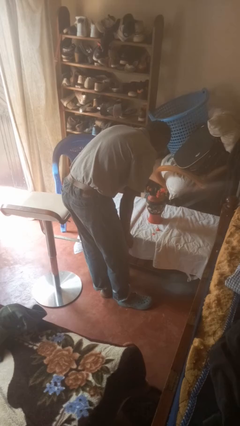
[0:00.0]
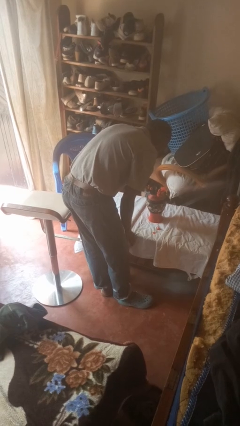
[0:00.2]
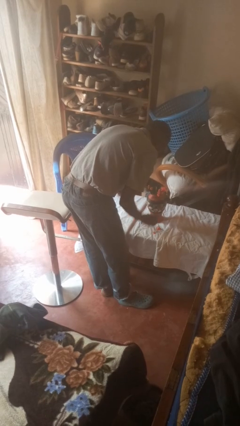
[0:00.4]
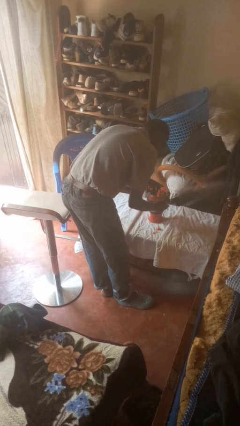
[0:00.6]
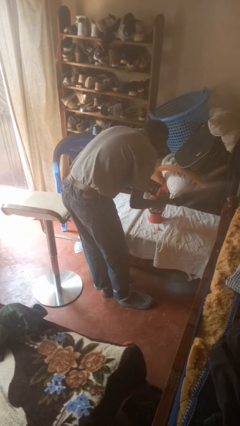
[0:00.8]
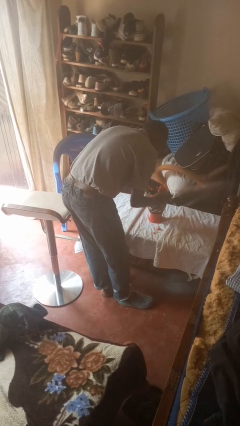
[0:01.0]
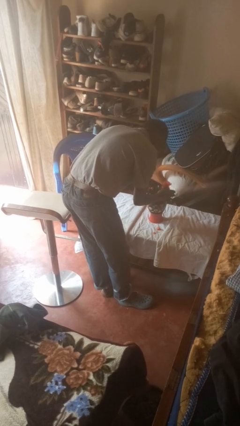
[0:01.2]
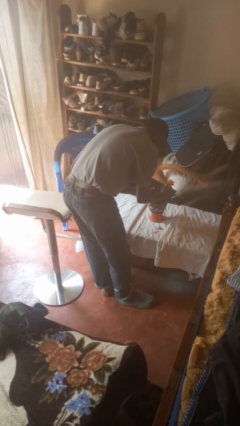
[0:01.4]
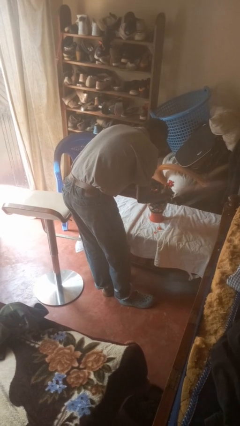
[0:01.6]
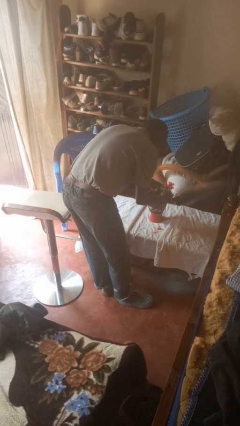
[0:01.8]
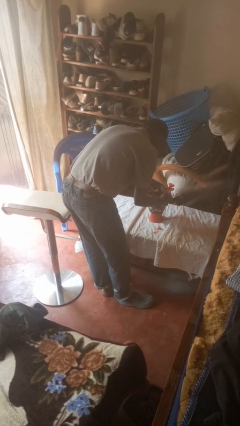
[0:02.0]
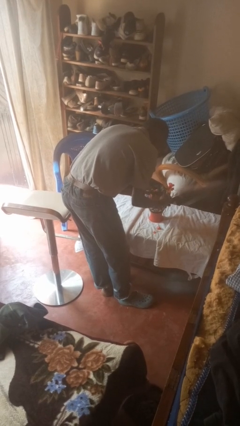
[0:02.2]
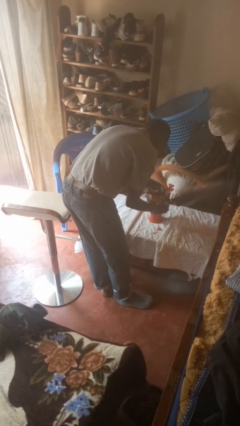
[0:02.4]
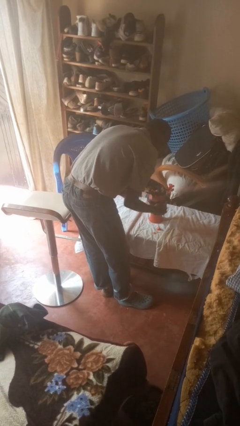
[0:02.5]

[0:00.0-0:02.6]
person arranges flowers in vase

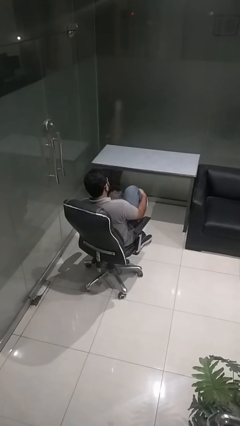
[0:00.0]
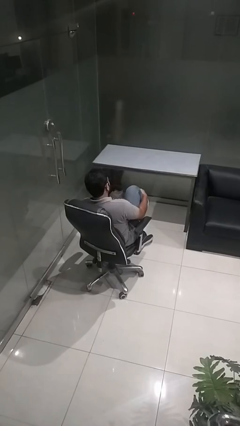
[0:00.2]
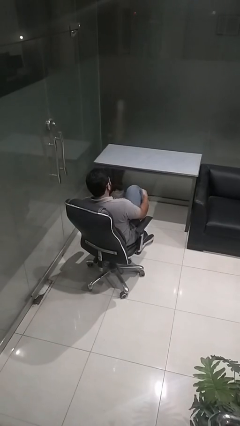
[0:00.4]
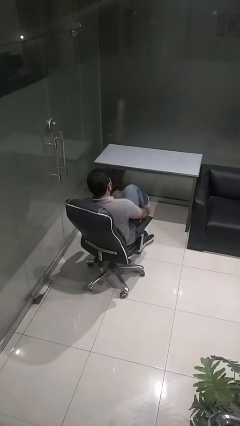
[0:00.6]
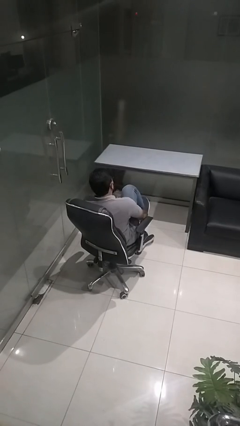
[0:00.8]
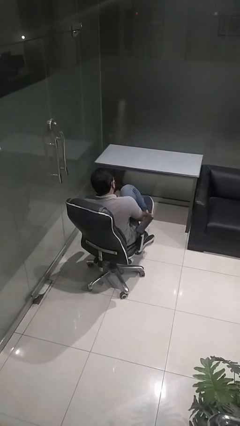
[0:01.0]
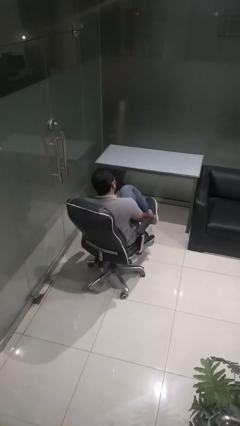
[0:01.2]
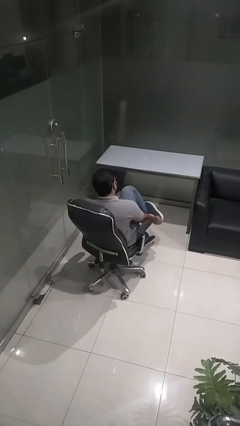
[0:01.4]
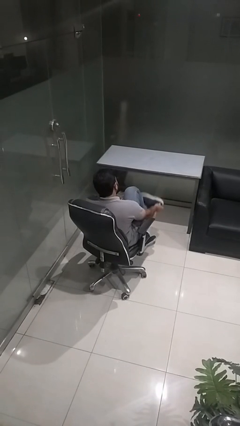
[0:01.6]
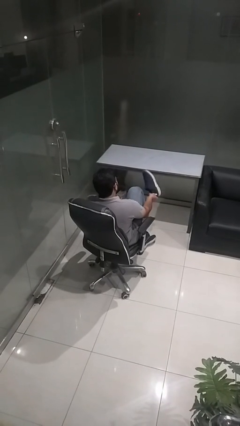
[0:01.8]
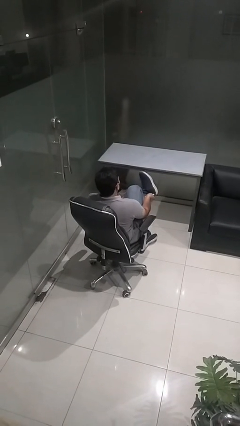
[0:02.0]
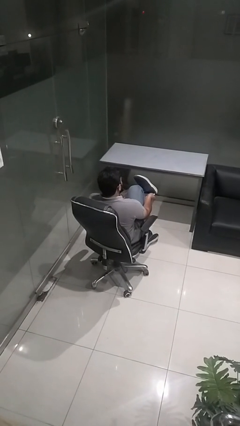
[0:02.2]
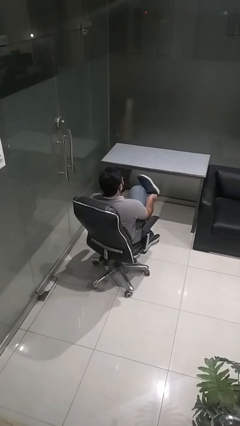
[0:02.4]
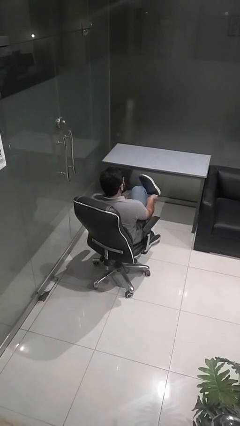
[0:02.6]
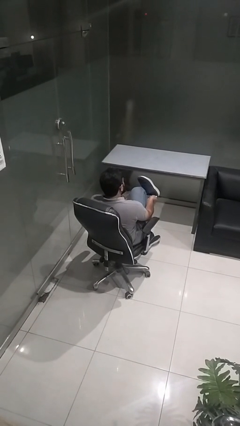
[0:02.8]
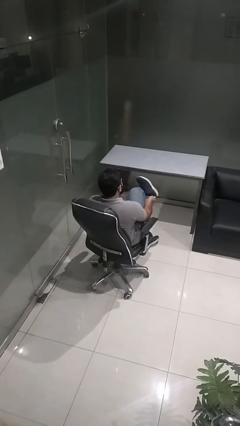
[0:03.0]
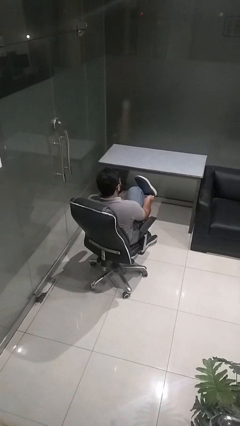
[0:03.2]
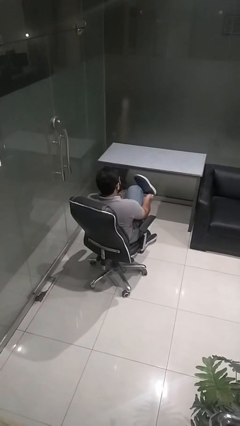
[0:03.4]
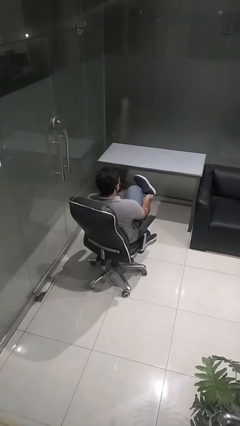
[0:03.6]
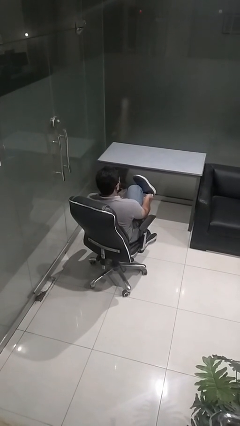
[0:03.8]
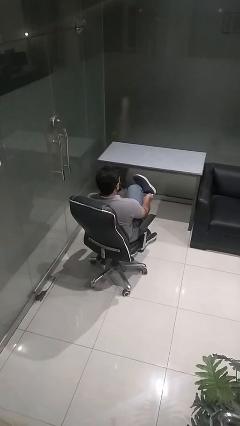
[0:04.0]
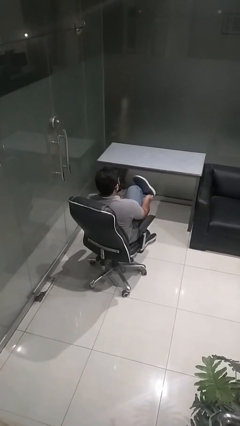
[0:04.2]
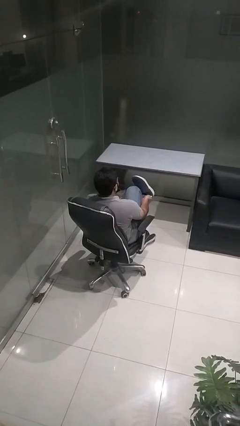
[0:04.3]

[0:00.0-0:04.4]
person takes off shoes

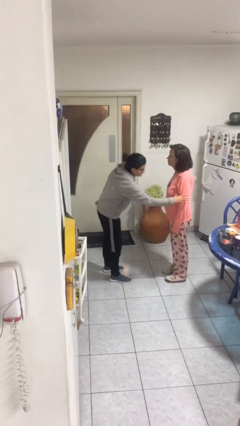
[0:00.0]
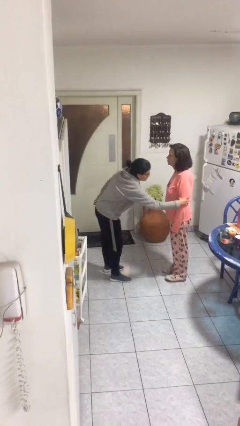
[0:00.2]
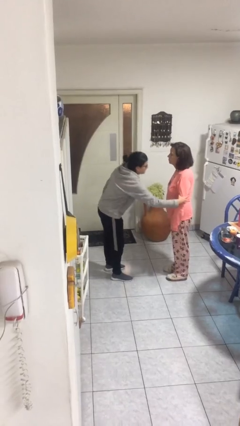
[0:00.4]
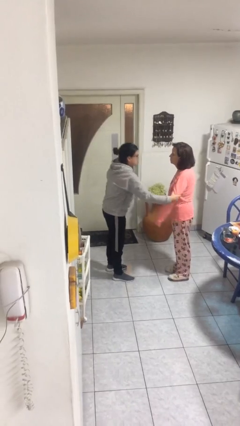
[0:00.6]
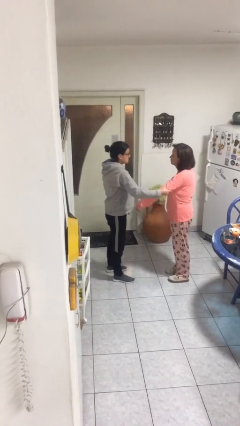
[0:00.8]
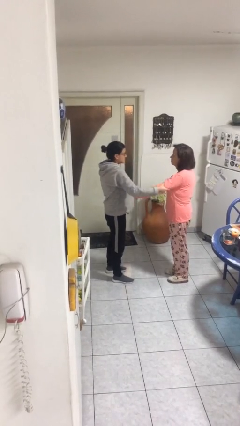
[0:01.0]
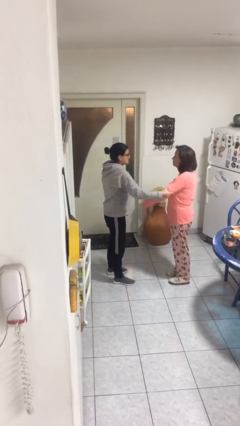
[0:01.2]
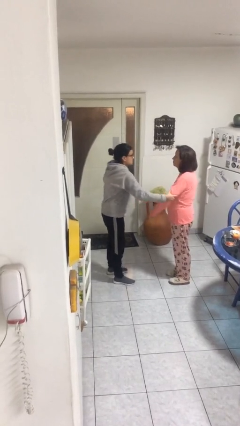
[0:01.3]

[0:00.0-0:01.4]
person grabs person by bicep

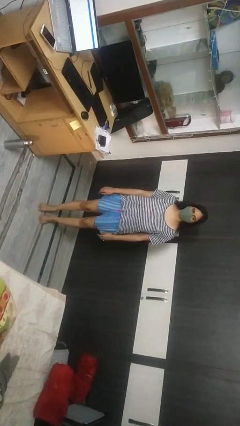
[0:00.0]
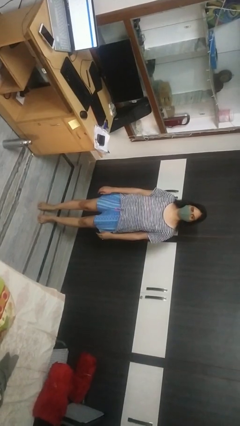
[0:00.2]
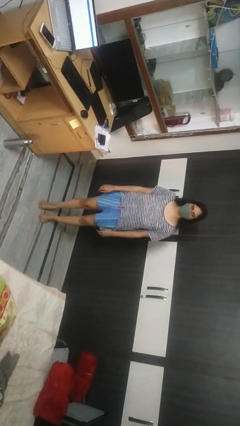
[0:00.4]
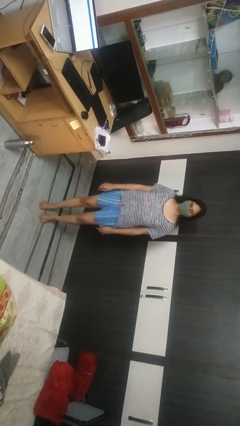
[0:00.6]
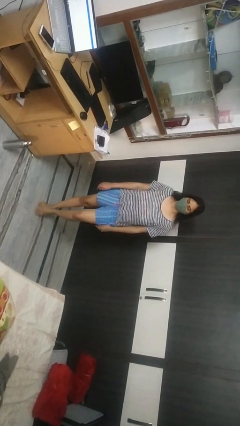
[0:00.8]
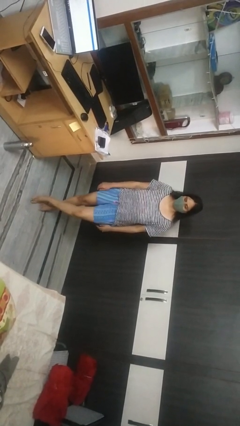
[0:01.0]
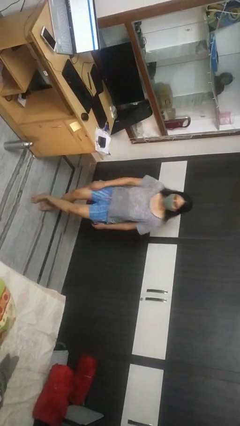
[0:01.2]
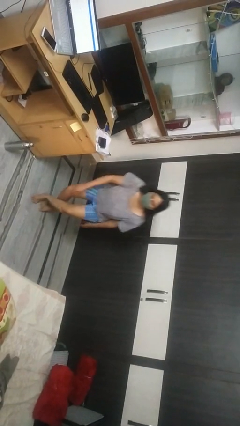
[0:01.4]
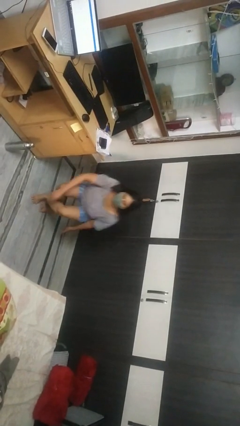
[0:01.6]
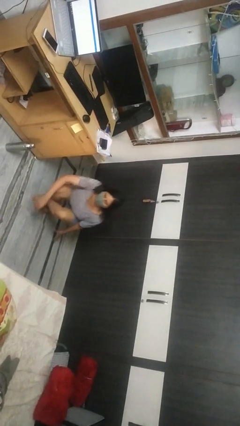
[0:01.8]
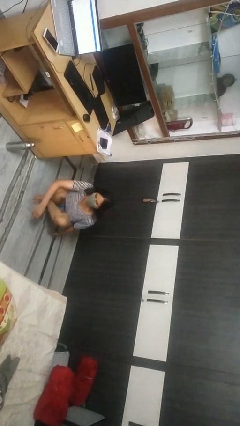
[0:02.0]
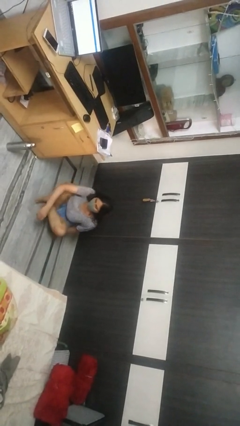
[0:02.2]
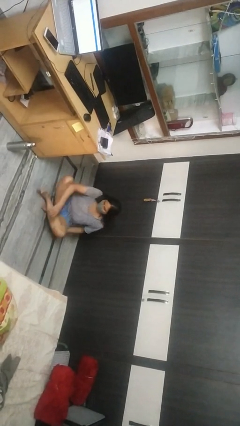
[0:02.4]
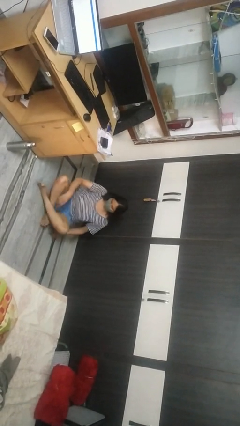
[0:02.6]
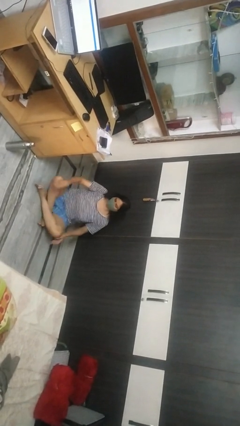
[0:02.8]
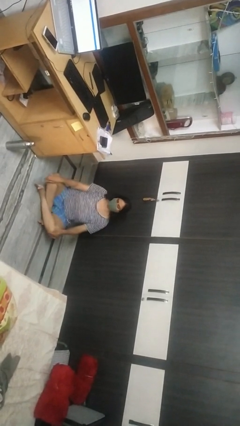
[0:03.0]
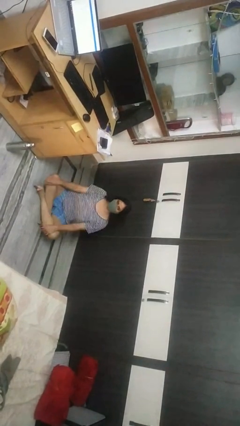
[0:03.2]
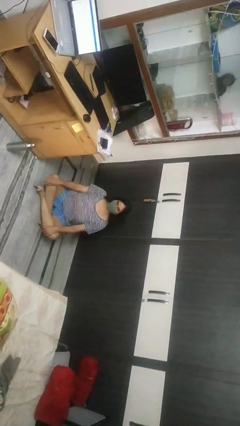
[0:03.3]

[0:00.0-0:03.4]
person sits crisscross

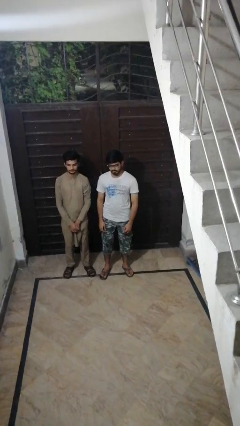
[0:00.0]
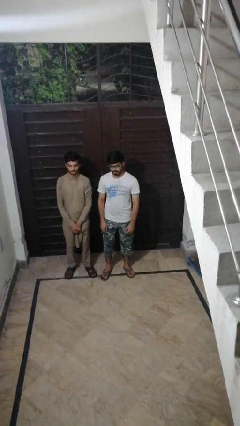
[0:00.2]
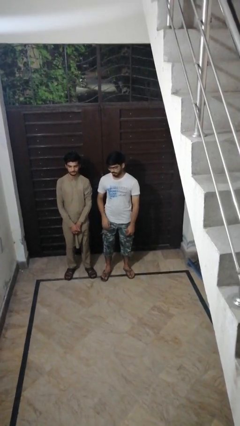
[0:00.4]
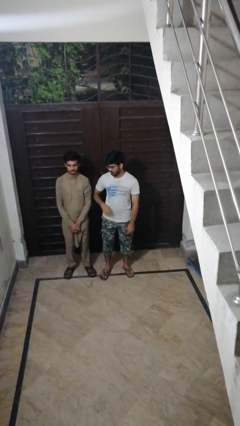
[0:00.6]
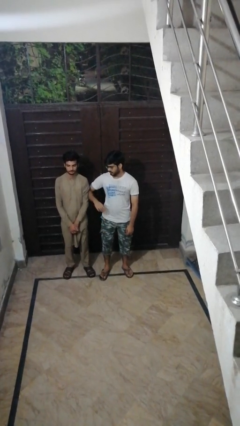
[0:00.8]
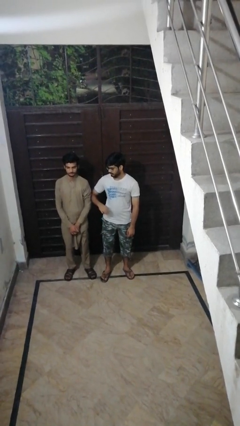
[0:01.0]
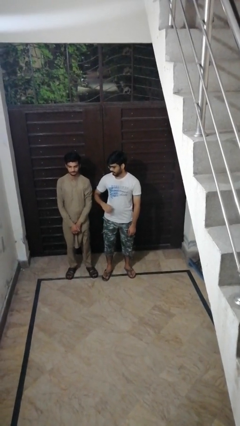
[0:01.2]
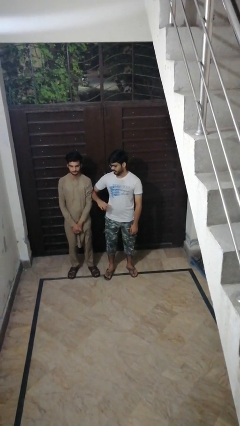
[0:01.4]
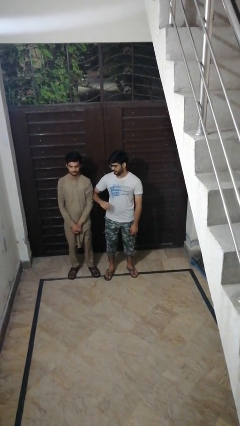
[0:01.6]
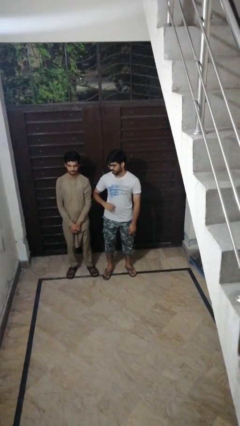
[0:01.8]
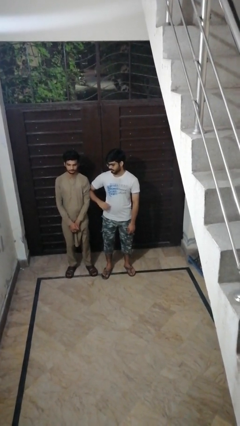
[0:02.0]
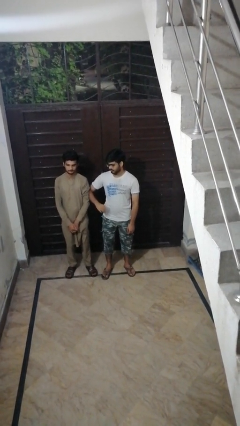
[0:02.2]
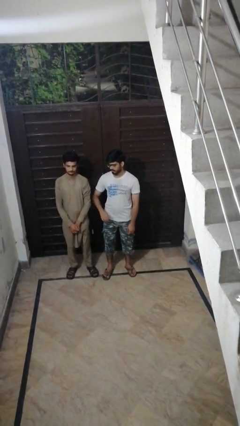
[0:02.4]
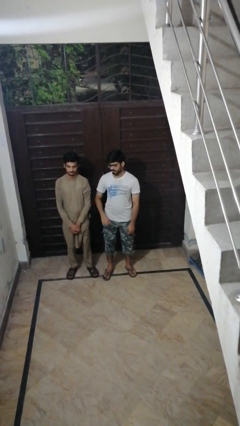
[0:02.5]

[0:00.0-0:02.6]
person nudges person with elbow

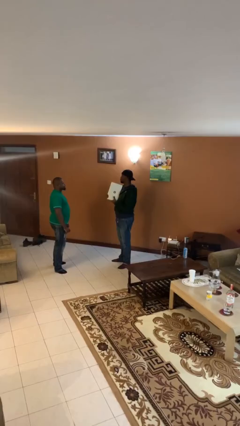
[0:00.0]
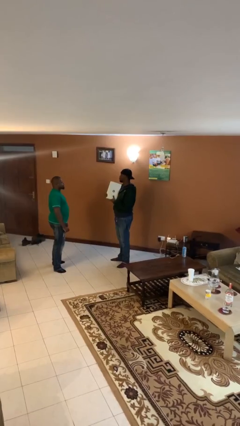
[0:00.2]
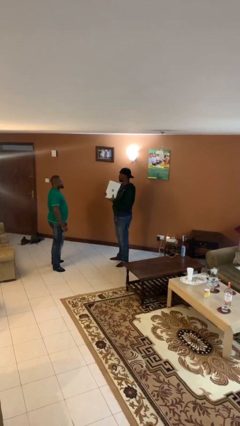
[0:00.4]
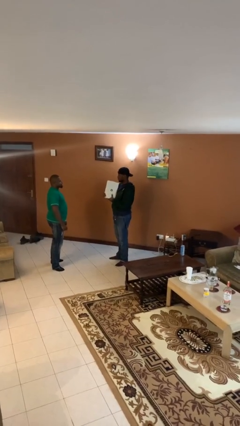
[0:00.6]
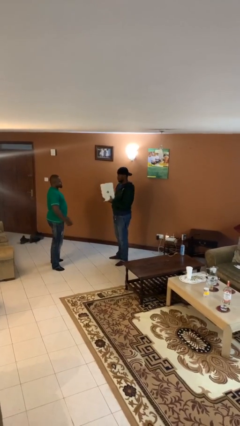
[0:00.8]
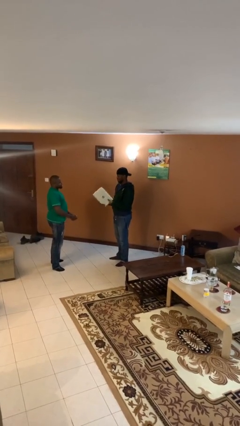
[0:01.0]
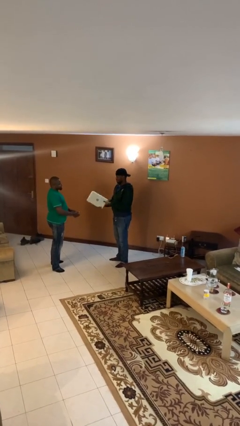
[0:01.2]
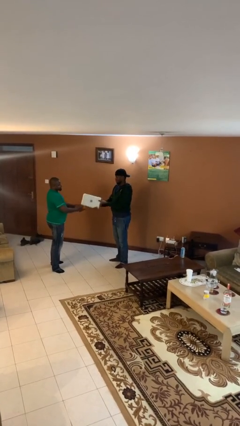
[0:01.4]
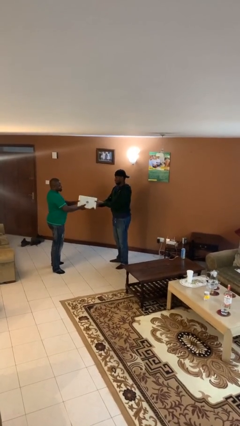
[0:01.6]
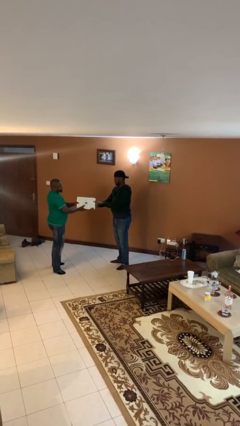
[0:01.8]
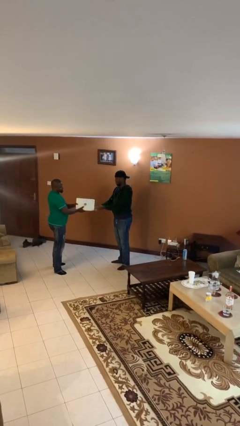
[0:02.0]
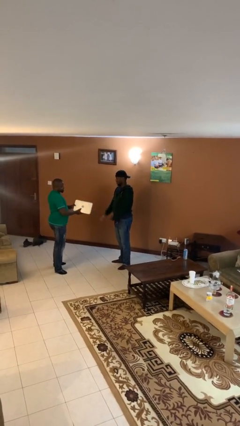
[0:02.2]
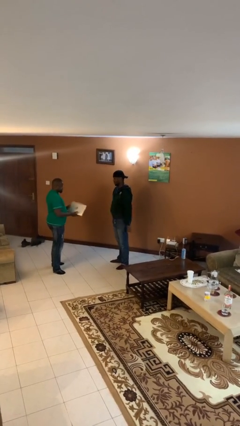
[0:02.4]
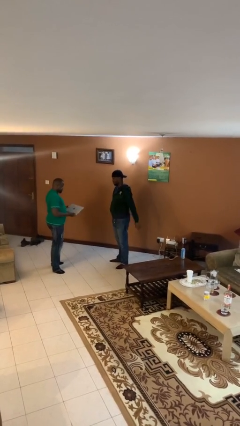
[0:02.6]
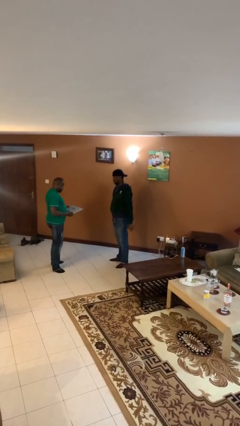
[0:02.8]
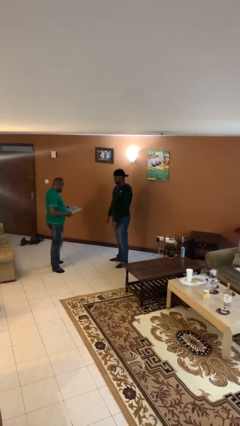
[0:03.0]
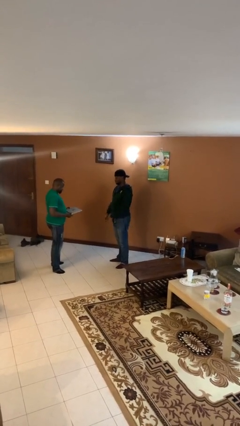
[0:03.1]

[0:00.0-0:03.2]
person transfers object to person
